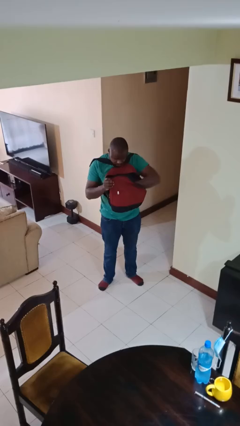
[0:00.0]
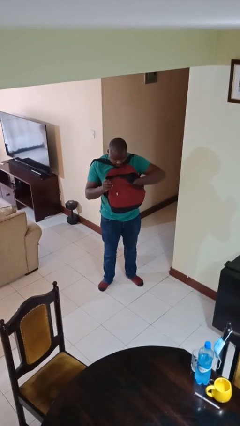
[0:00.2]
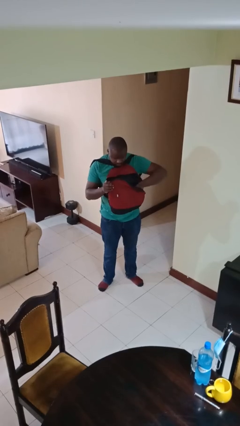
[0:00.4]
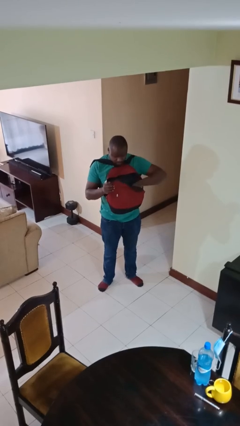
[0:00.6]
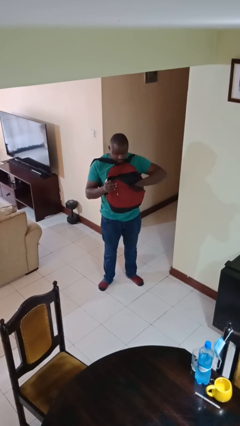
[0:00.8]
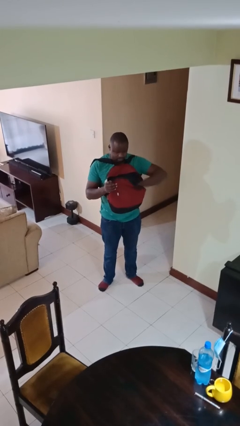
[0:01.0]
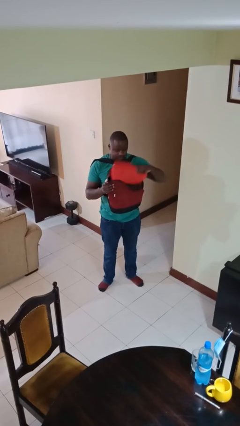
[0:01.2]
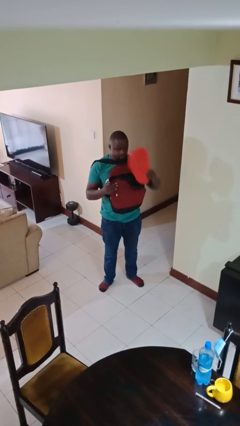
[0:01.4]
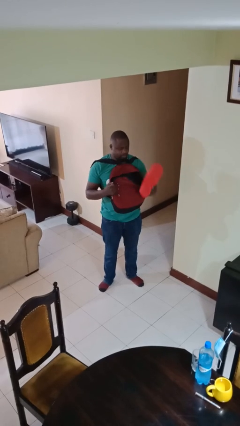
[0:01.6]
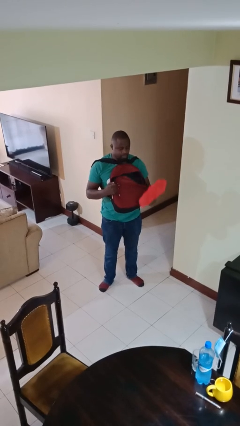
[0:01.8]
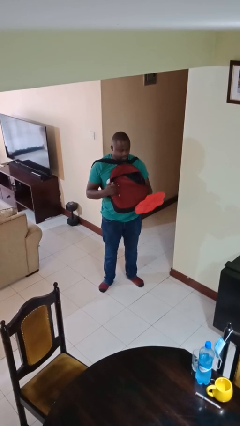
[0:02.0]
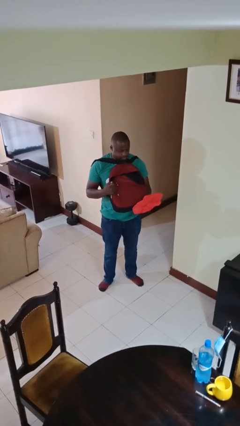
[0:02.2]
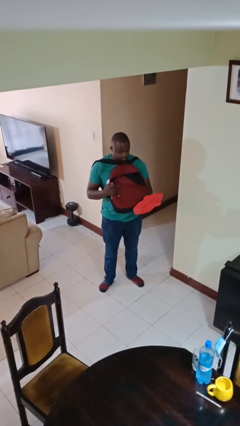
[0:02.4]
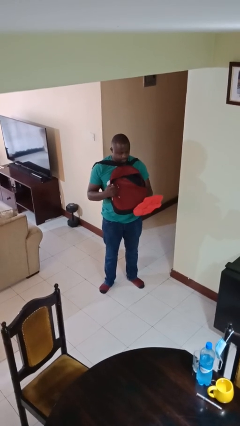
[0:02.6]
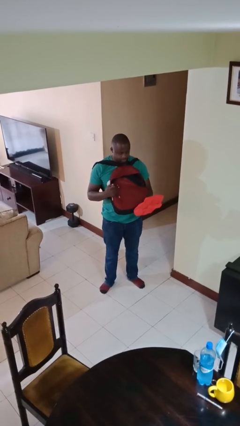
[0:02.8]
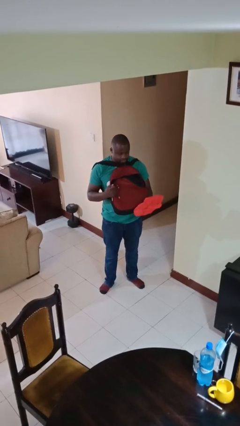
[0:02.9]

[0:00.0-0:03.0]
person takes object from backpack

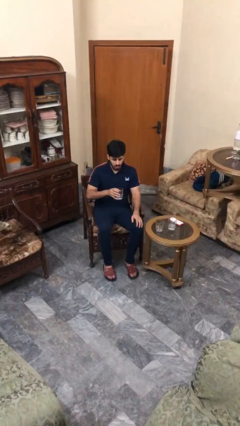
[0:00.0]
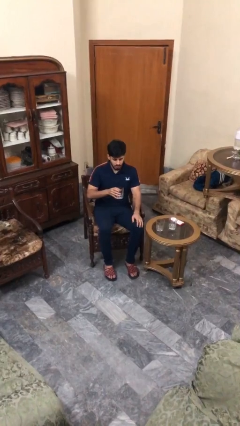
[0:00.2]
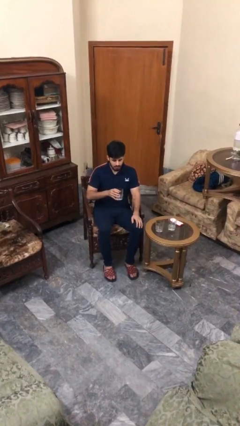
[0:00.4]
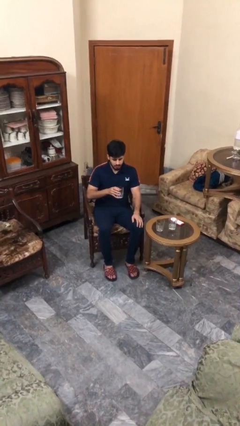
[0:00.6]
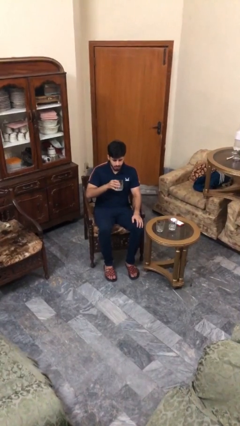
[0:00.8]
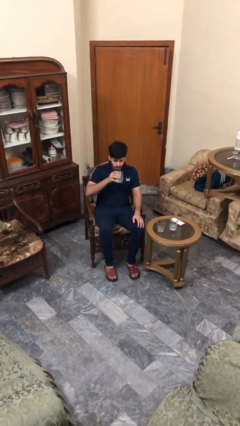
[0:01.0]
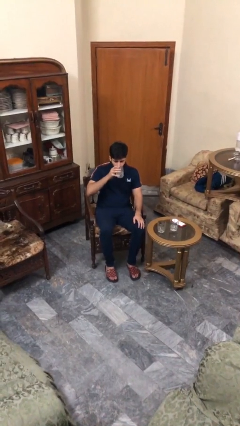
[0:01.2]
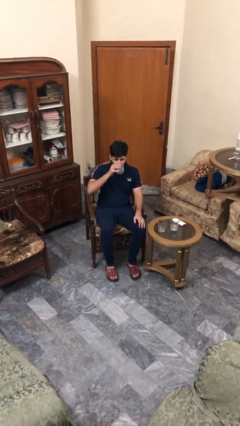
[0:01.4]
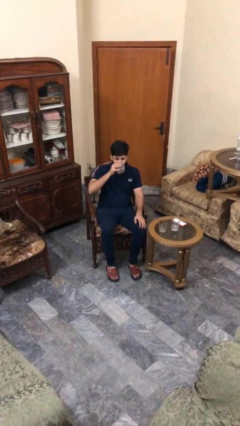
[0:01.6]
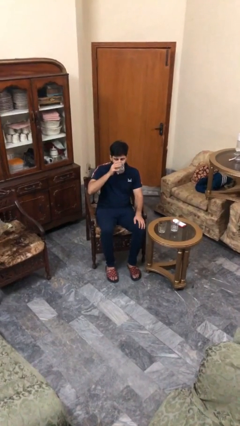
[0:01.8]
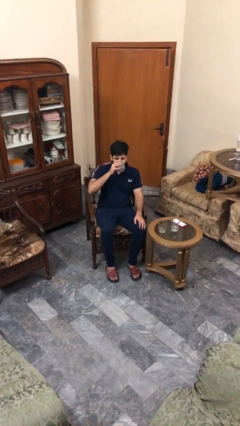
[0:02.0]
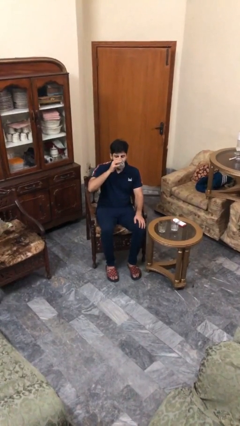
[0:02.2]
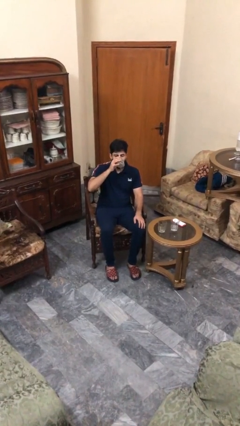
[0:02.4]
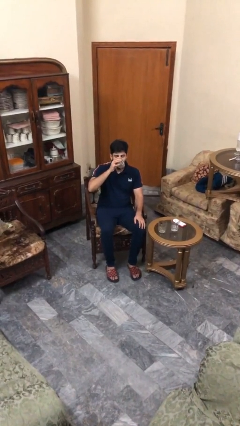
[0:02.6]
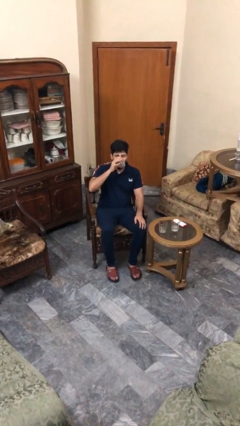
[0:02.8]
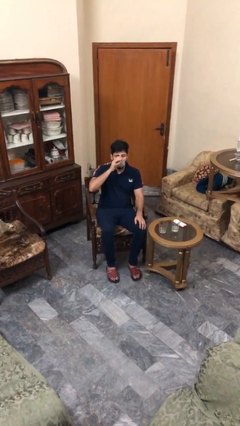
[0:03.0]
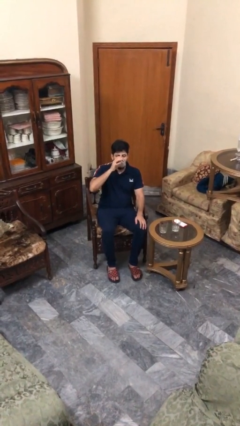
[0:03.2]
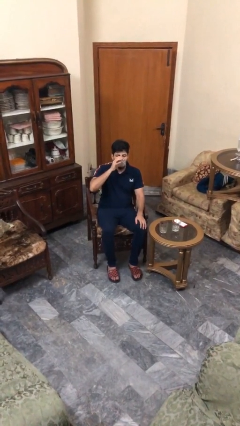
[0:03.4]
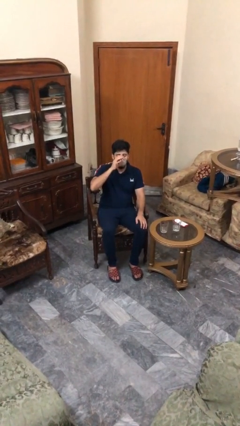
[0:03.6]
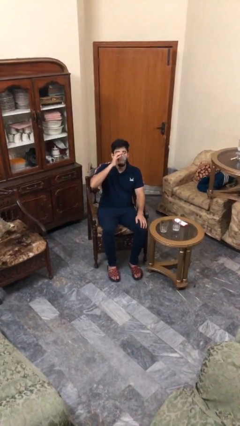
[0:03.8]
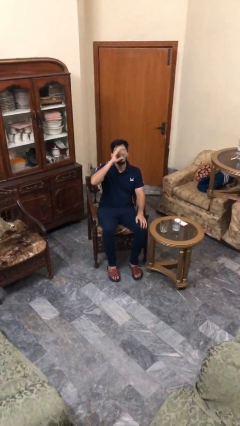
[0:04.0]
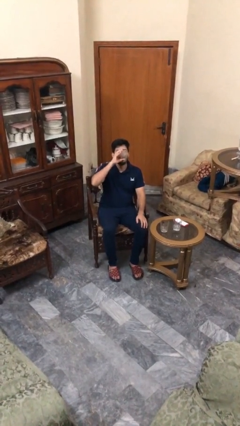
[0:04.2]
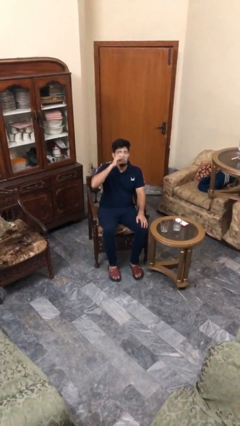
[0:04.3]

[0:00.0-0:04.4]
person drinks from shotglass

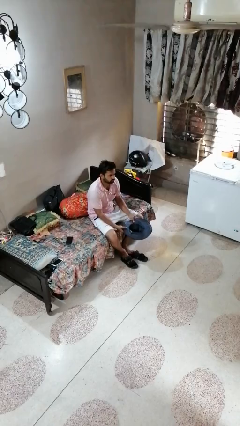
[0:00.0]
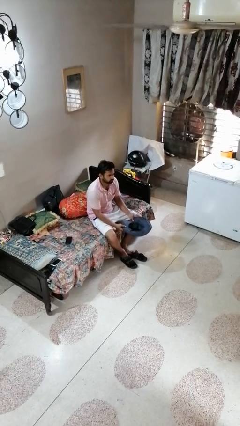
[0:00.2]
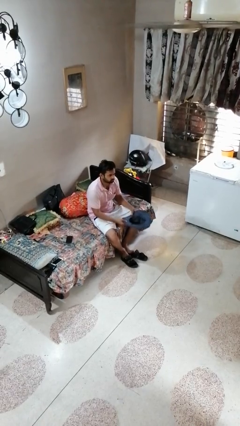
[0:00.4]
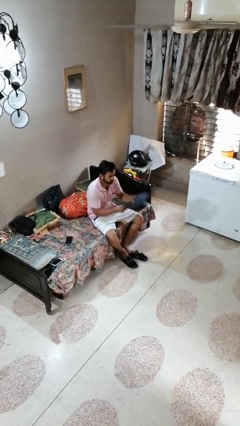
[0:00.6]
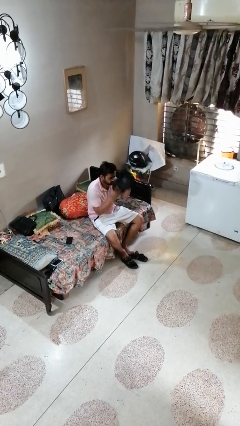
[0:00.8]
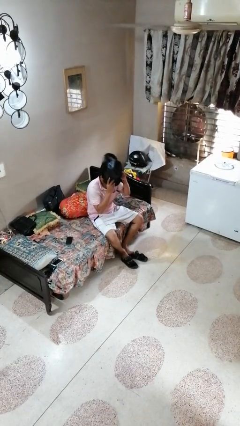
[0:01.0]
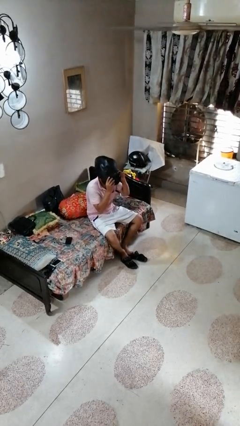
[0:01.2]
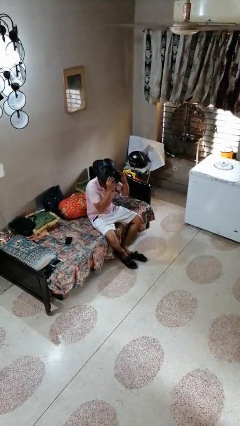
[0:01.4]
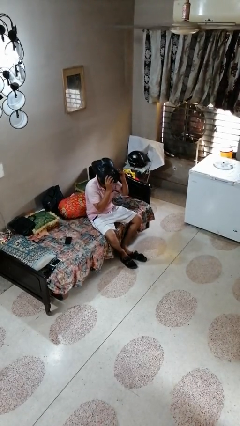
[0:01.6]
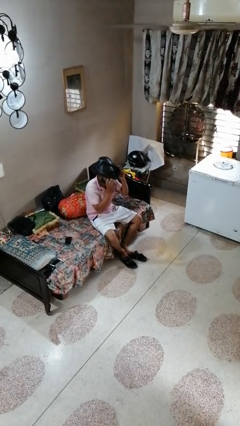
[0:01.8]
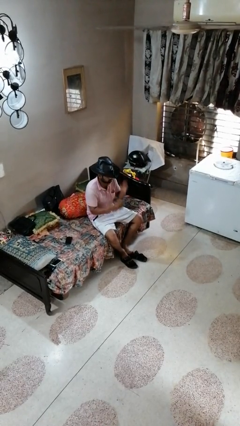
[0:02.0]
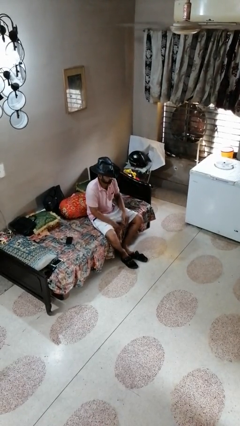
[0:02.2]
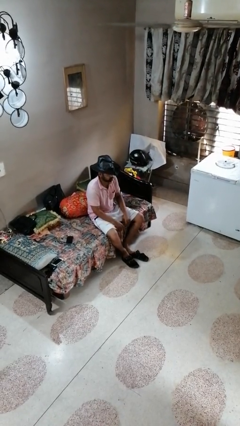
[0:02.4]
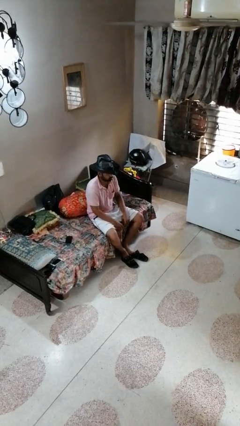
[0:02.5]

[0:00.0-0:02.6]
person puts on hat

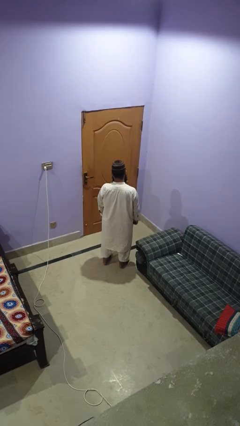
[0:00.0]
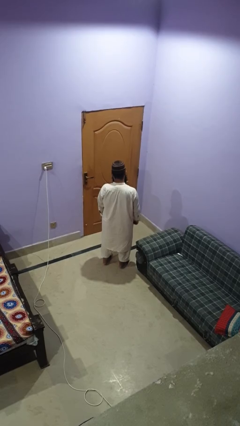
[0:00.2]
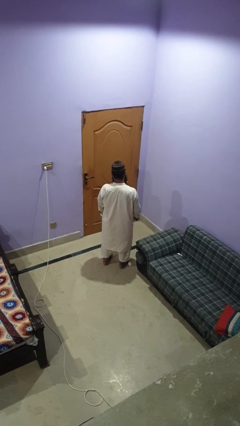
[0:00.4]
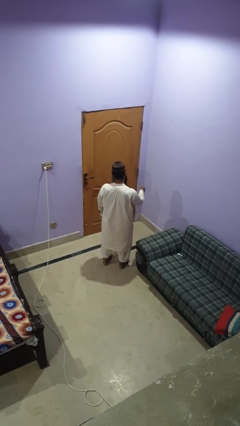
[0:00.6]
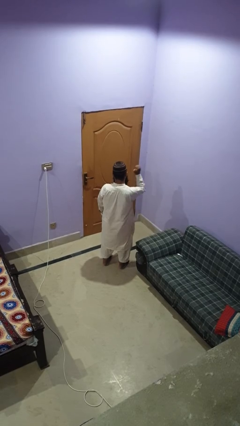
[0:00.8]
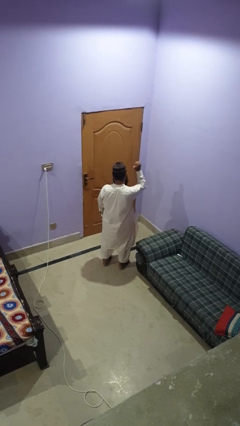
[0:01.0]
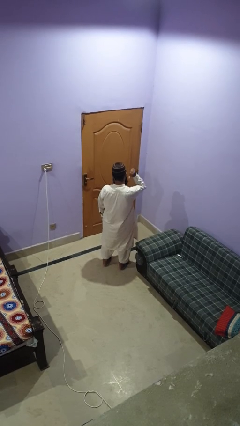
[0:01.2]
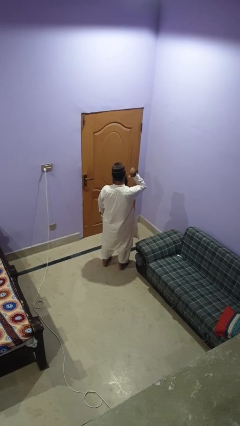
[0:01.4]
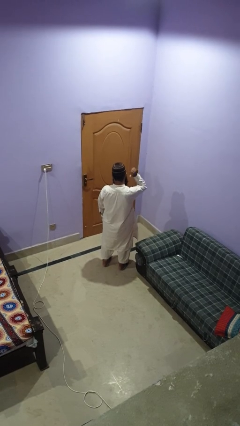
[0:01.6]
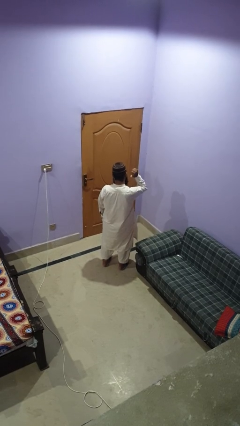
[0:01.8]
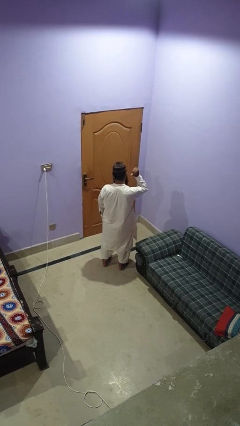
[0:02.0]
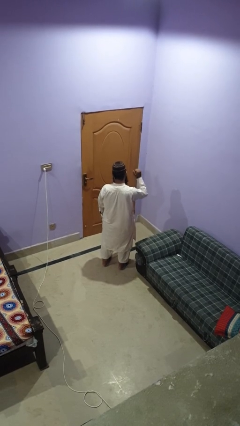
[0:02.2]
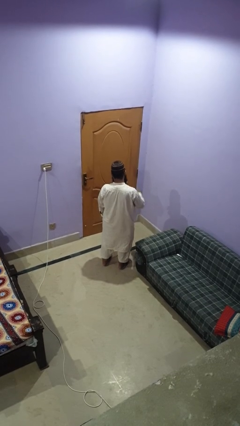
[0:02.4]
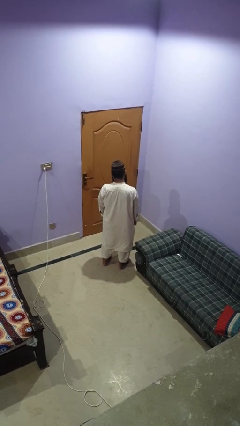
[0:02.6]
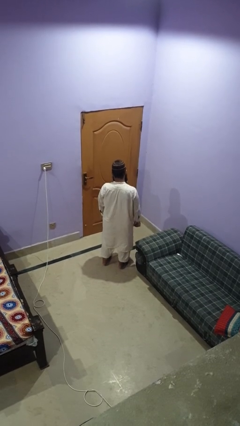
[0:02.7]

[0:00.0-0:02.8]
person gestures behind me

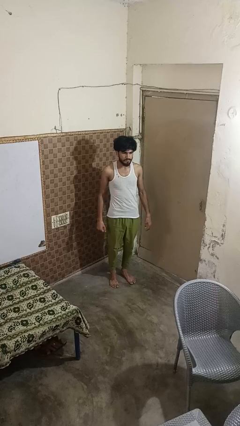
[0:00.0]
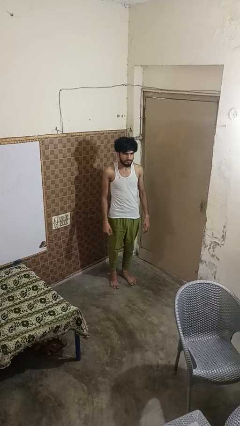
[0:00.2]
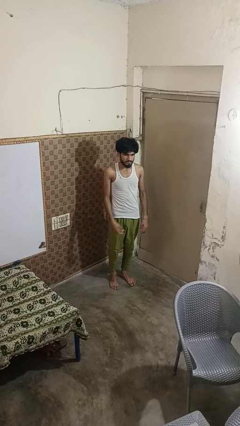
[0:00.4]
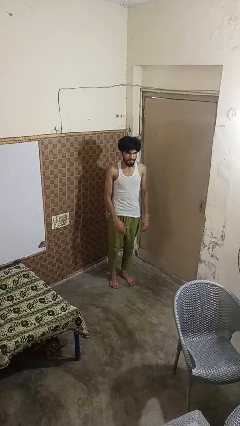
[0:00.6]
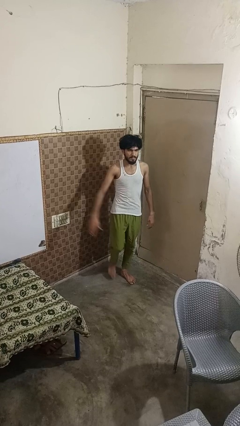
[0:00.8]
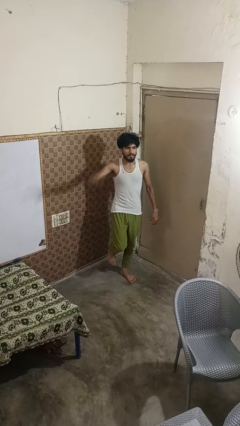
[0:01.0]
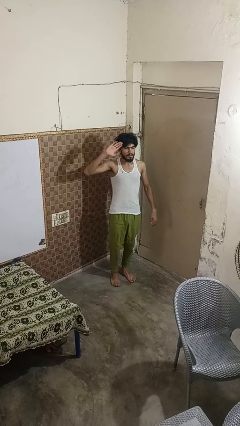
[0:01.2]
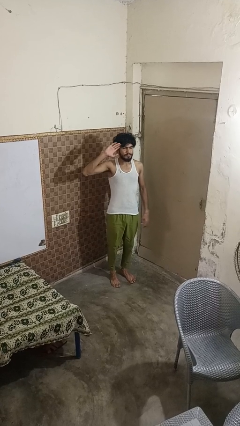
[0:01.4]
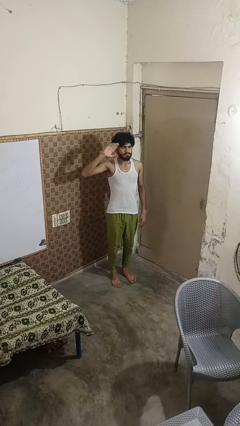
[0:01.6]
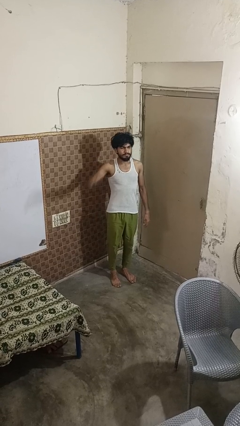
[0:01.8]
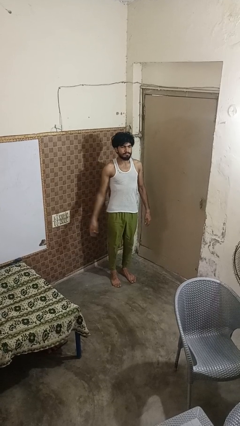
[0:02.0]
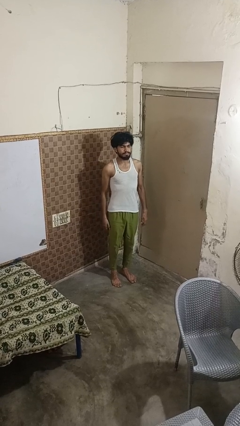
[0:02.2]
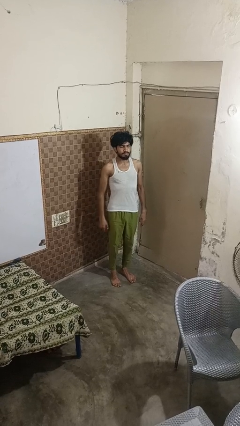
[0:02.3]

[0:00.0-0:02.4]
person salutes

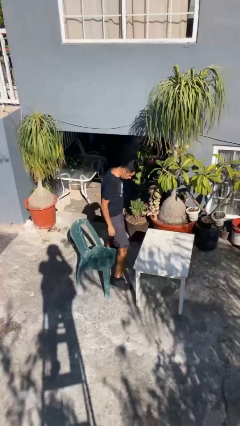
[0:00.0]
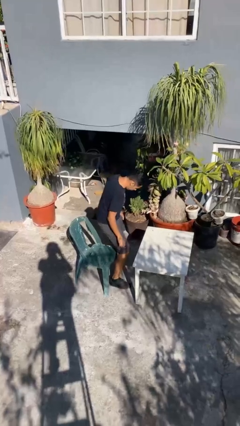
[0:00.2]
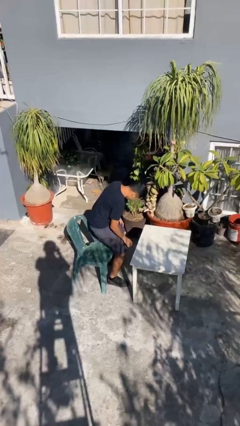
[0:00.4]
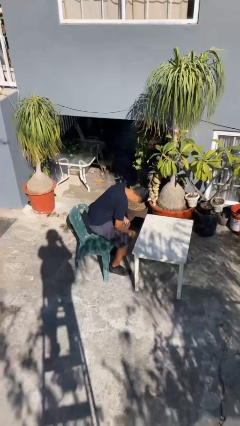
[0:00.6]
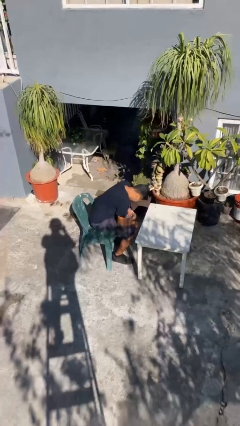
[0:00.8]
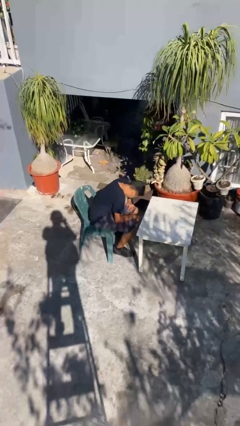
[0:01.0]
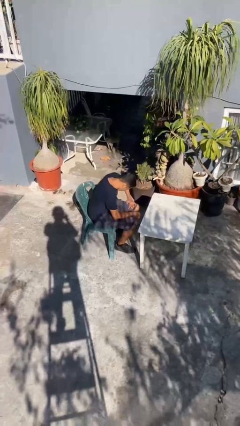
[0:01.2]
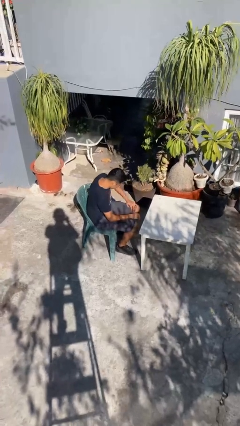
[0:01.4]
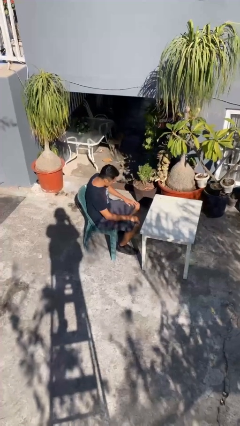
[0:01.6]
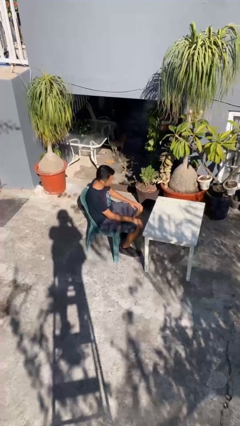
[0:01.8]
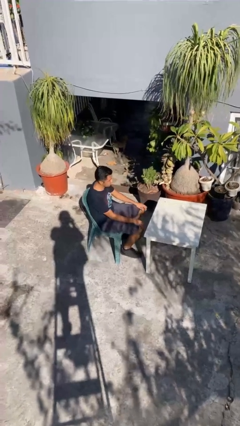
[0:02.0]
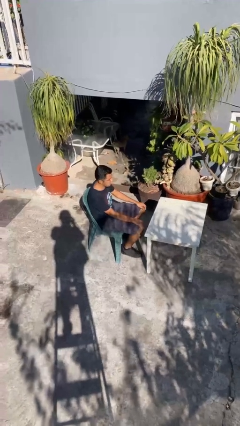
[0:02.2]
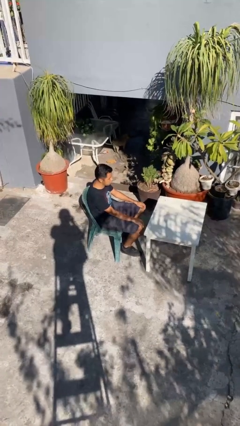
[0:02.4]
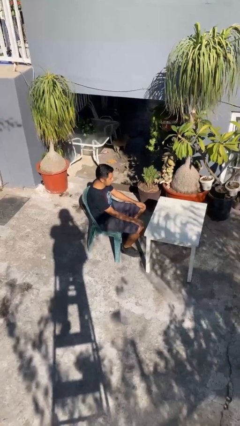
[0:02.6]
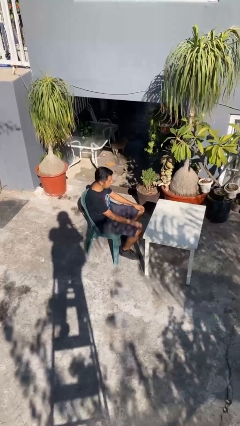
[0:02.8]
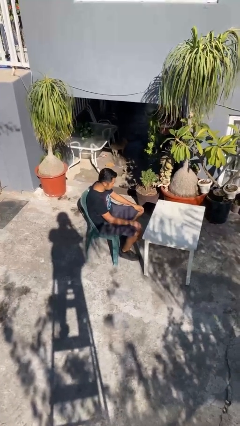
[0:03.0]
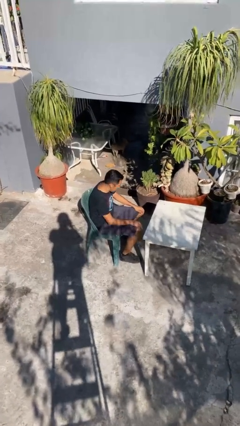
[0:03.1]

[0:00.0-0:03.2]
person sits down
